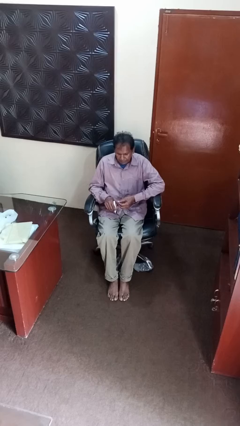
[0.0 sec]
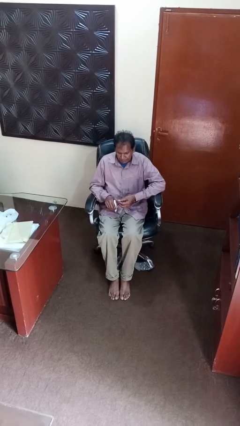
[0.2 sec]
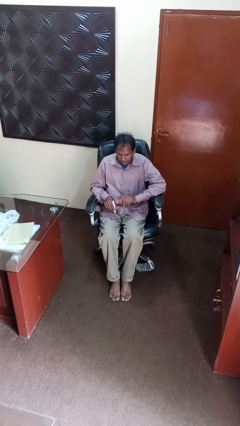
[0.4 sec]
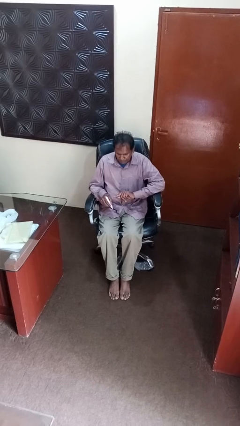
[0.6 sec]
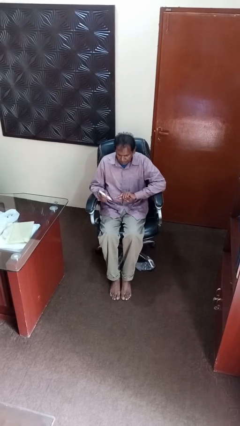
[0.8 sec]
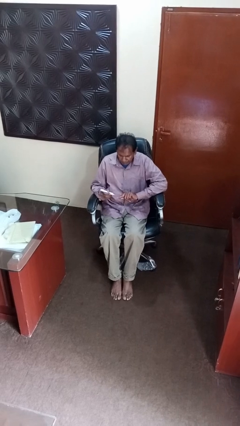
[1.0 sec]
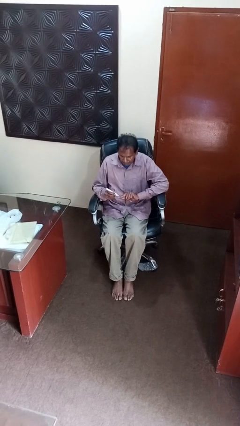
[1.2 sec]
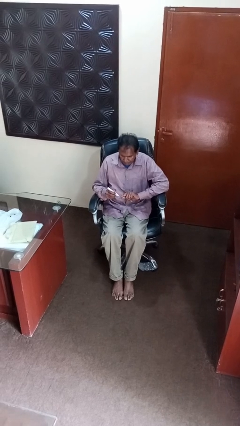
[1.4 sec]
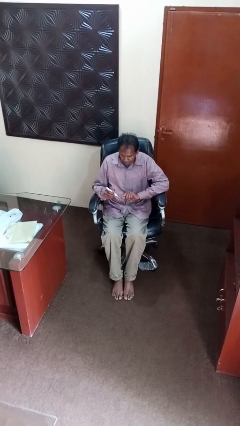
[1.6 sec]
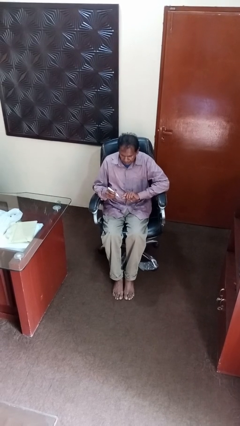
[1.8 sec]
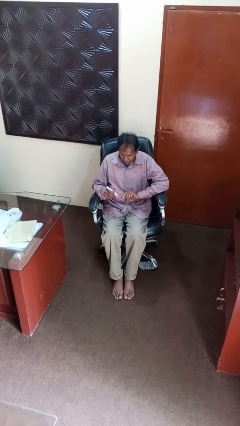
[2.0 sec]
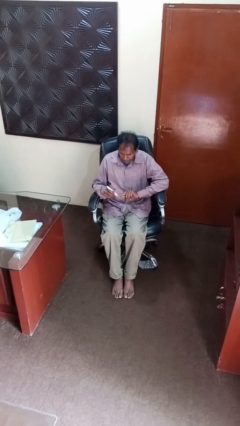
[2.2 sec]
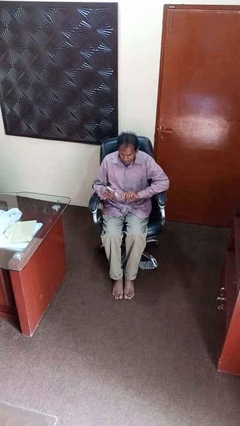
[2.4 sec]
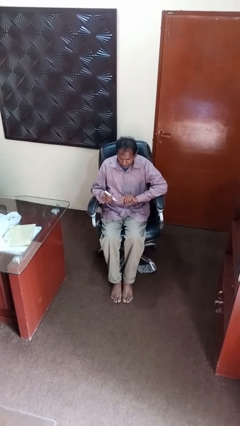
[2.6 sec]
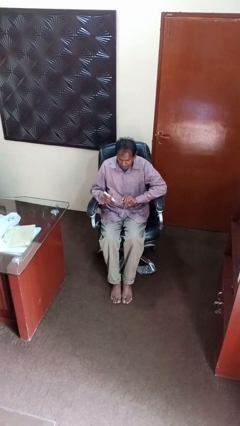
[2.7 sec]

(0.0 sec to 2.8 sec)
person paints fingernails

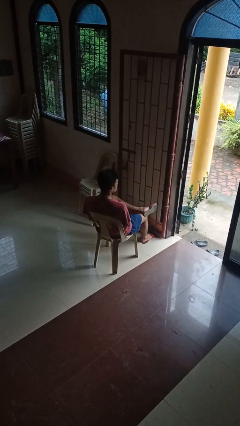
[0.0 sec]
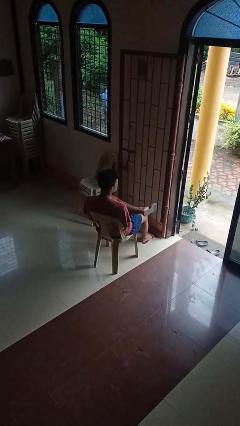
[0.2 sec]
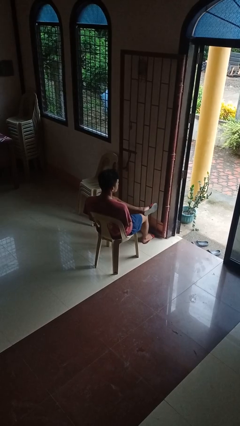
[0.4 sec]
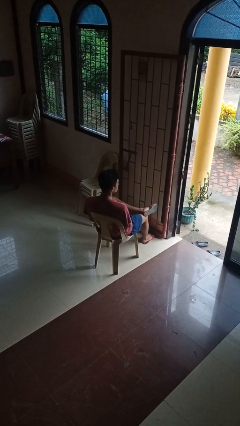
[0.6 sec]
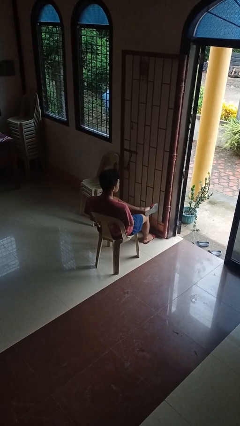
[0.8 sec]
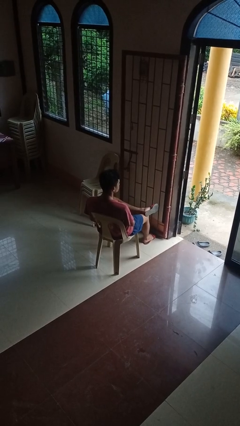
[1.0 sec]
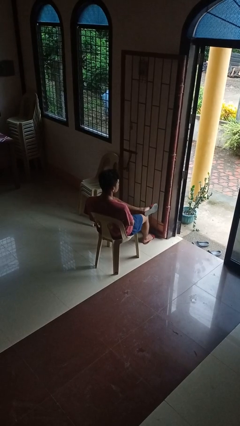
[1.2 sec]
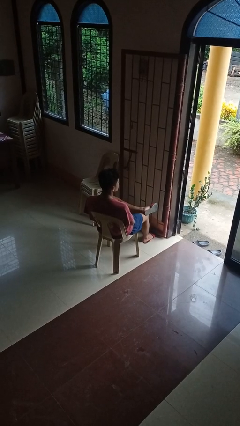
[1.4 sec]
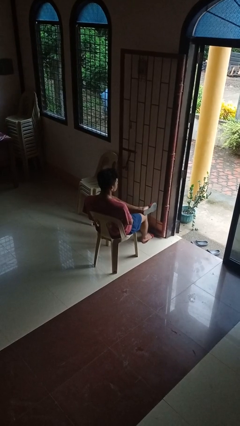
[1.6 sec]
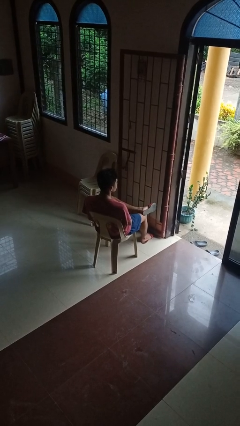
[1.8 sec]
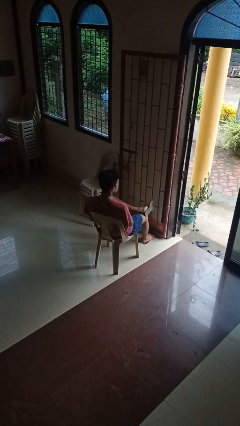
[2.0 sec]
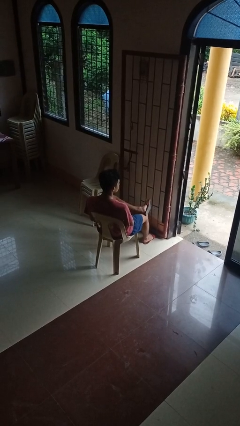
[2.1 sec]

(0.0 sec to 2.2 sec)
person crosses legs

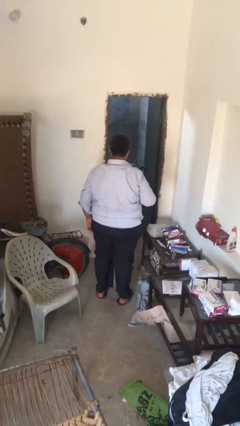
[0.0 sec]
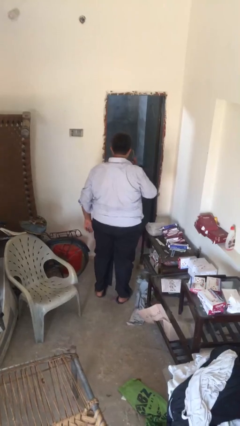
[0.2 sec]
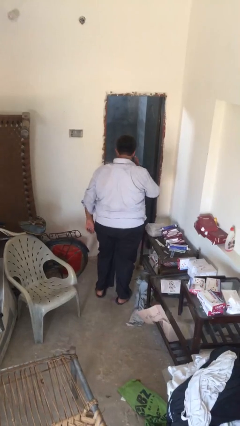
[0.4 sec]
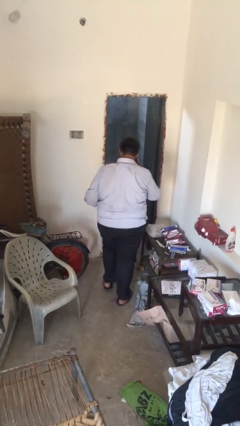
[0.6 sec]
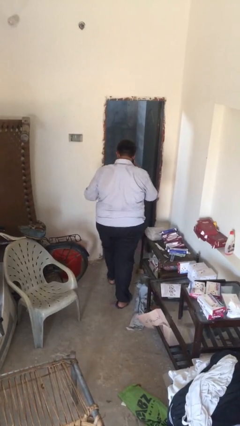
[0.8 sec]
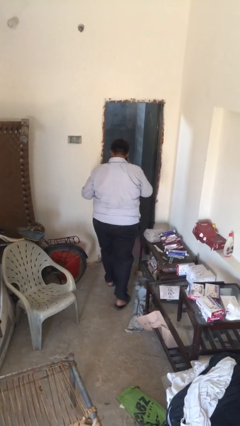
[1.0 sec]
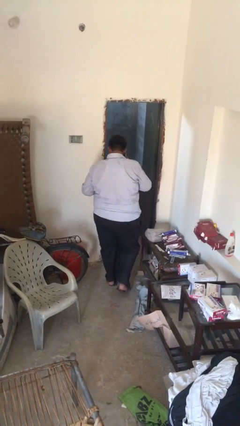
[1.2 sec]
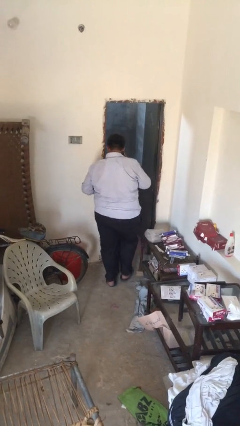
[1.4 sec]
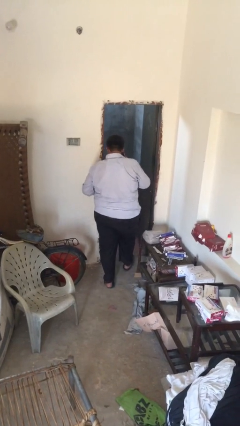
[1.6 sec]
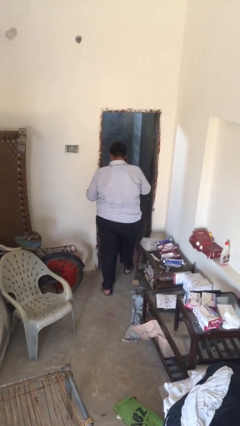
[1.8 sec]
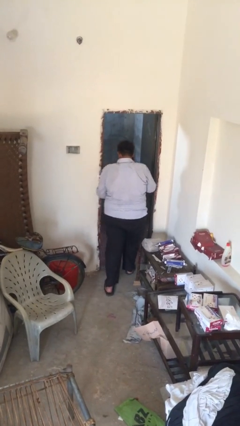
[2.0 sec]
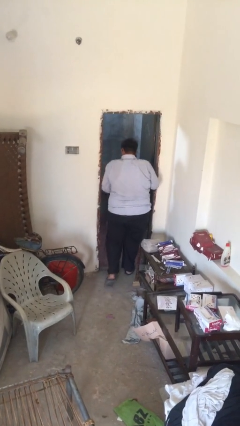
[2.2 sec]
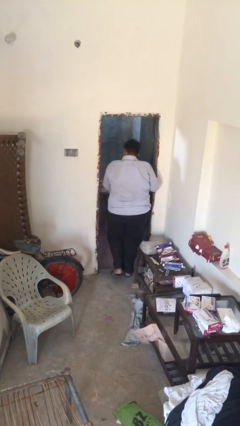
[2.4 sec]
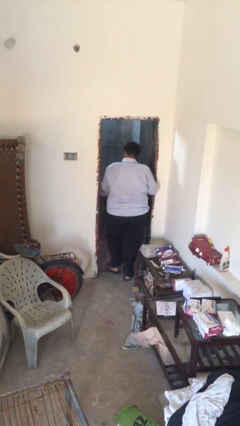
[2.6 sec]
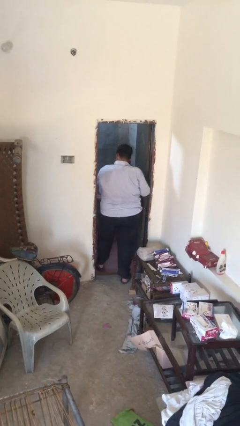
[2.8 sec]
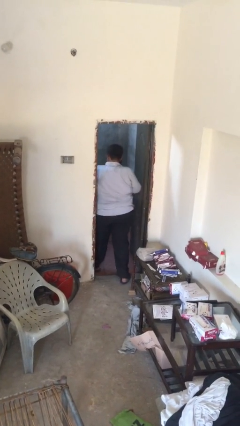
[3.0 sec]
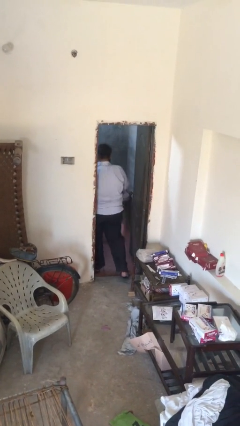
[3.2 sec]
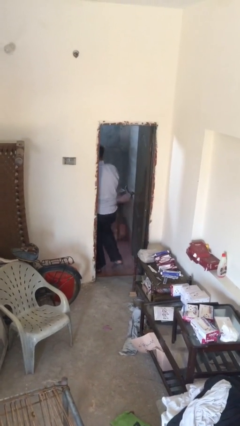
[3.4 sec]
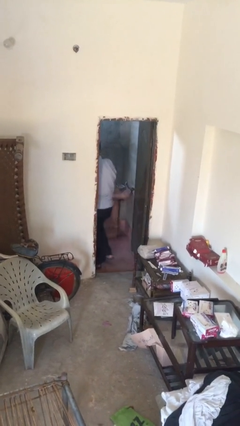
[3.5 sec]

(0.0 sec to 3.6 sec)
person exits scene through structure

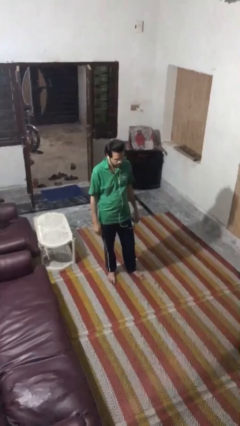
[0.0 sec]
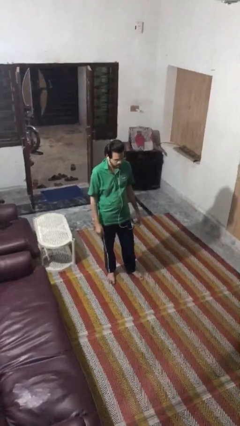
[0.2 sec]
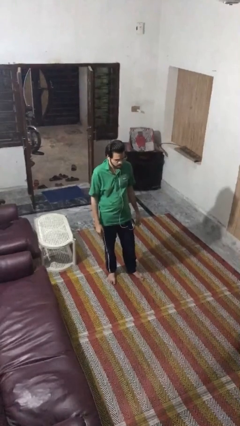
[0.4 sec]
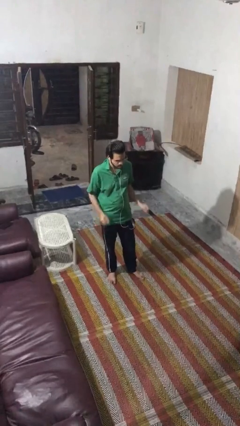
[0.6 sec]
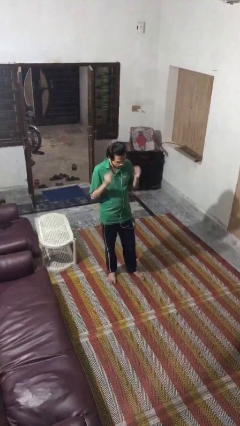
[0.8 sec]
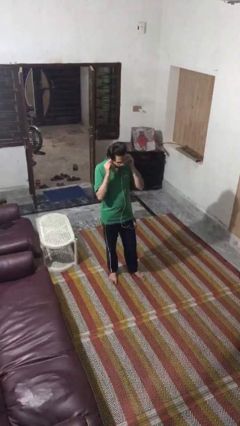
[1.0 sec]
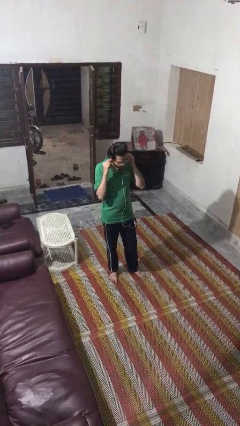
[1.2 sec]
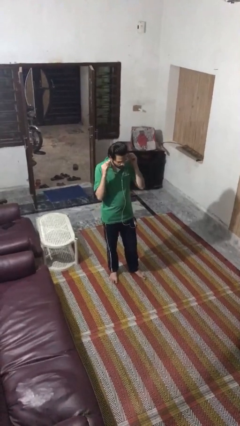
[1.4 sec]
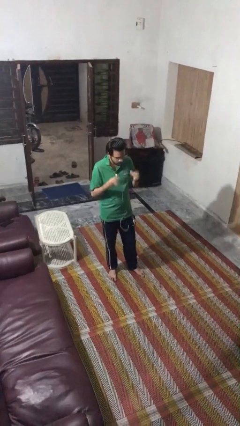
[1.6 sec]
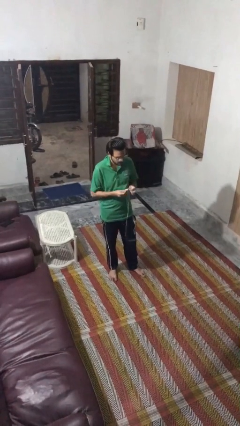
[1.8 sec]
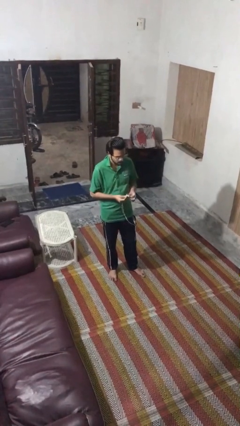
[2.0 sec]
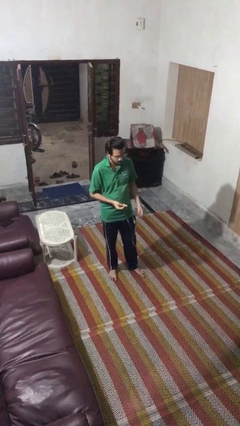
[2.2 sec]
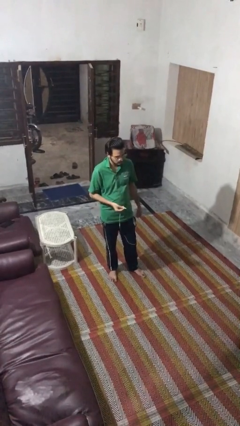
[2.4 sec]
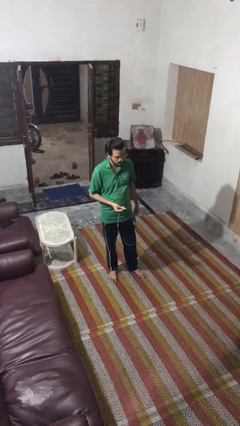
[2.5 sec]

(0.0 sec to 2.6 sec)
person takes off headphones

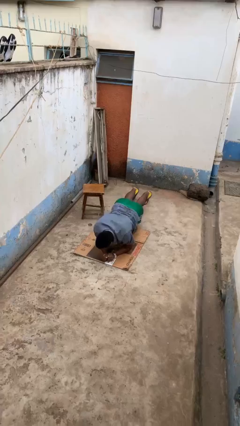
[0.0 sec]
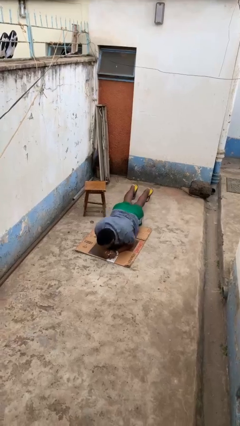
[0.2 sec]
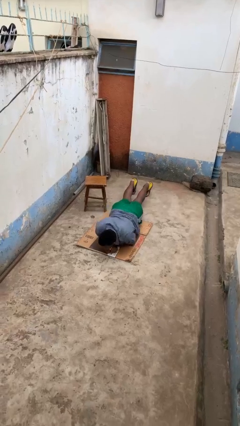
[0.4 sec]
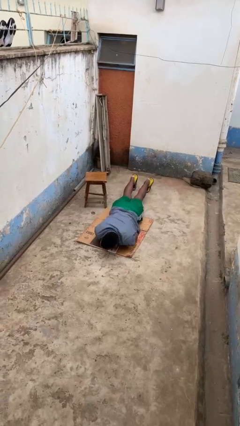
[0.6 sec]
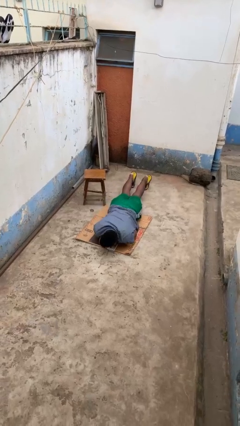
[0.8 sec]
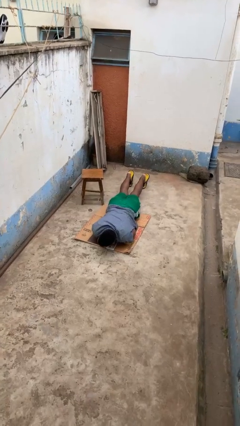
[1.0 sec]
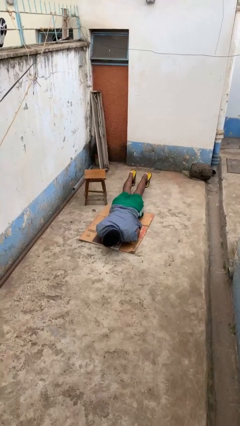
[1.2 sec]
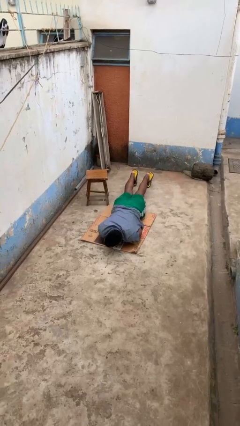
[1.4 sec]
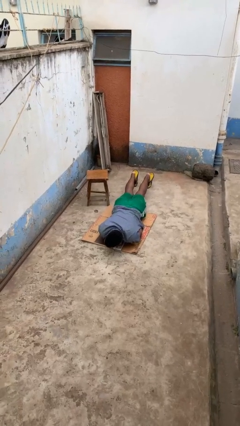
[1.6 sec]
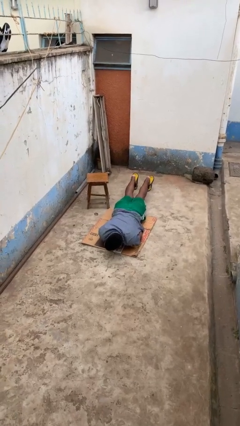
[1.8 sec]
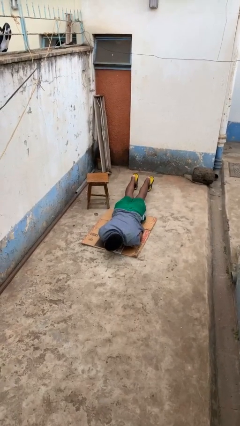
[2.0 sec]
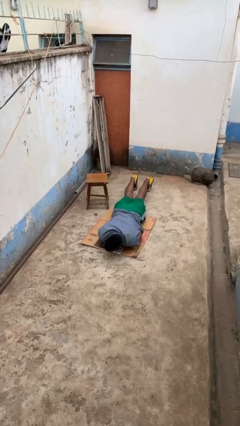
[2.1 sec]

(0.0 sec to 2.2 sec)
person lies down on floor

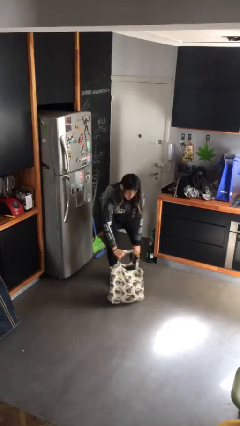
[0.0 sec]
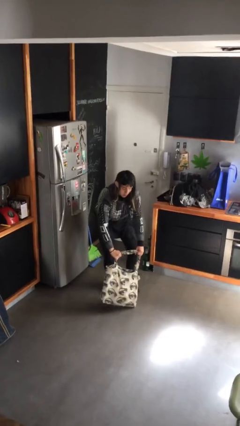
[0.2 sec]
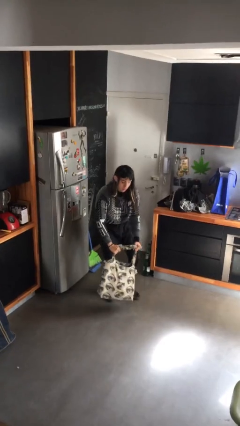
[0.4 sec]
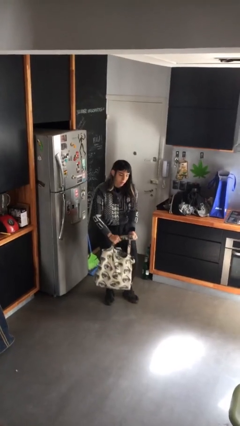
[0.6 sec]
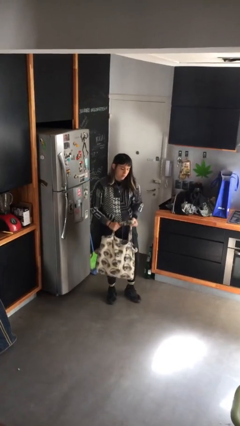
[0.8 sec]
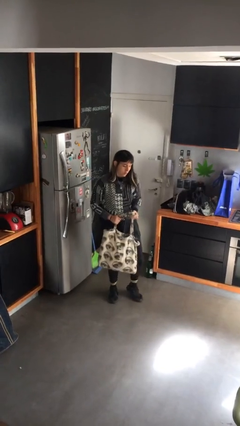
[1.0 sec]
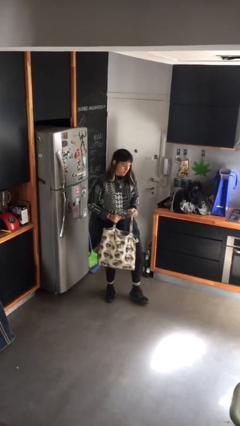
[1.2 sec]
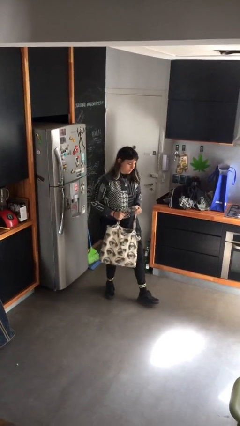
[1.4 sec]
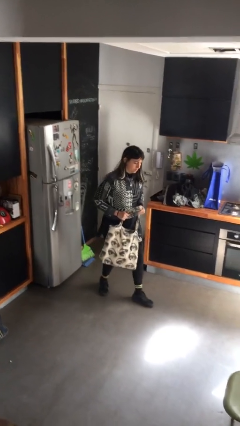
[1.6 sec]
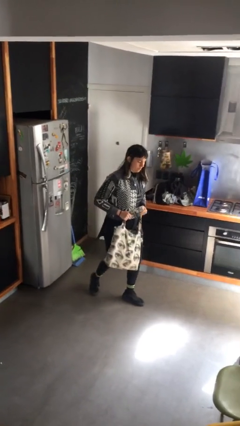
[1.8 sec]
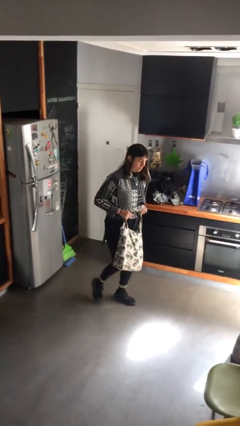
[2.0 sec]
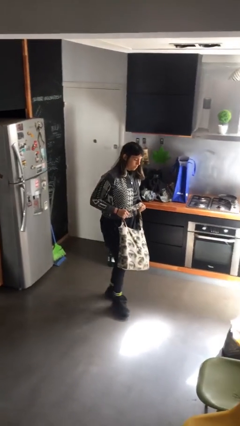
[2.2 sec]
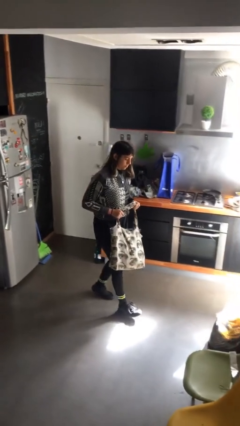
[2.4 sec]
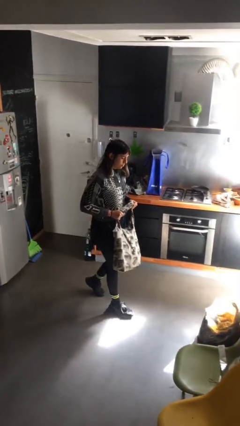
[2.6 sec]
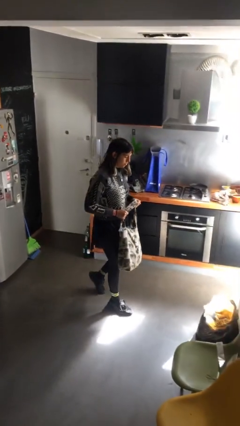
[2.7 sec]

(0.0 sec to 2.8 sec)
person carries heavy object

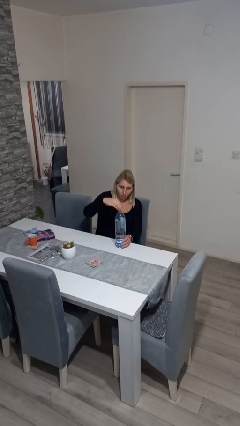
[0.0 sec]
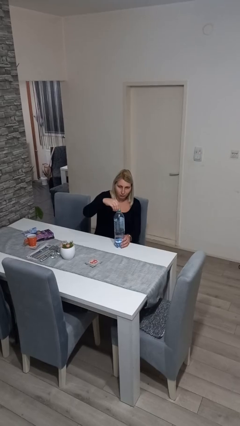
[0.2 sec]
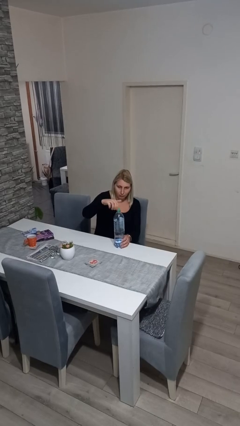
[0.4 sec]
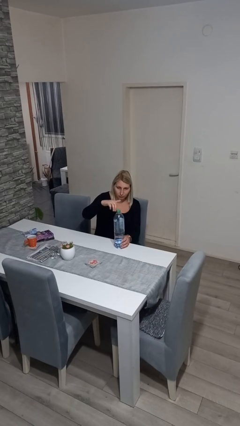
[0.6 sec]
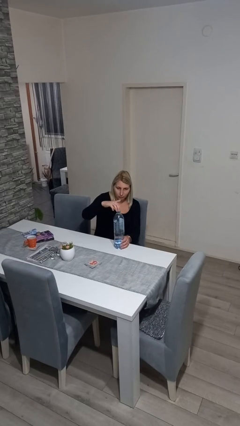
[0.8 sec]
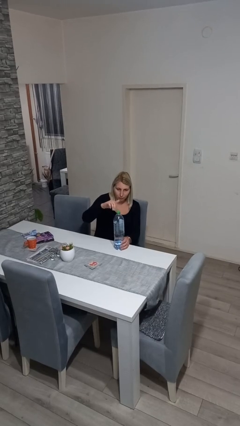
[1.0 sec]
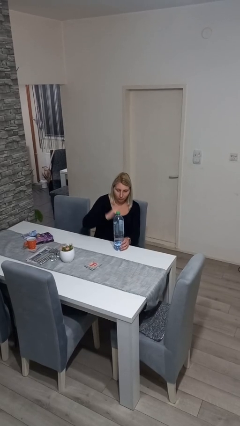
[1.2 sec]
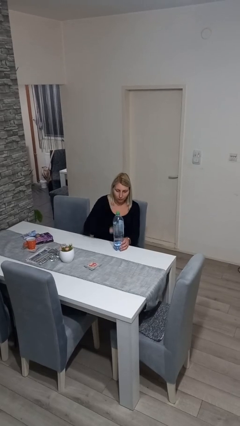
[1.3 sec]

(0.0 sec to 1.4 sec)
person screws lid to bottle
